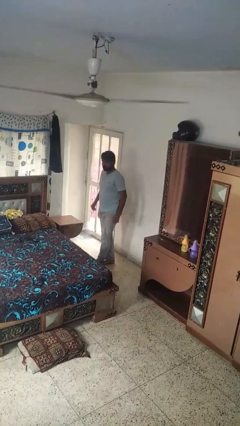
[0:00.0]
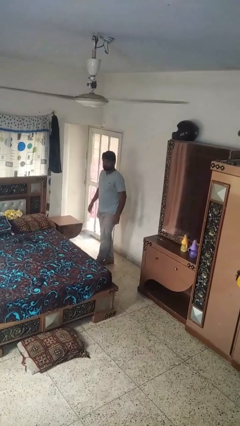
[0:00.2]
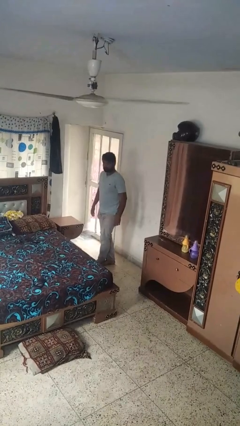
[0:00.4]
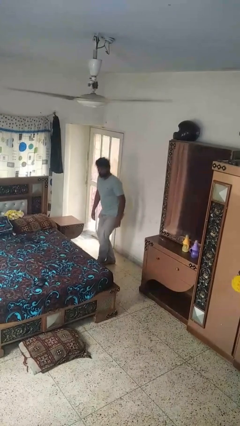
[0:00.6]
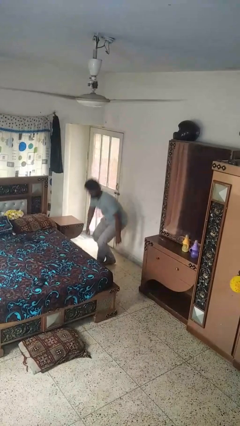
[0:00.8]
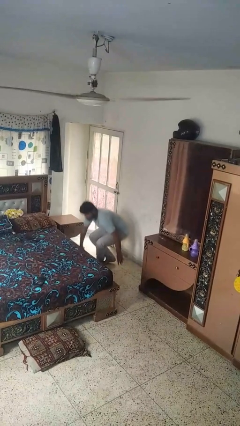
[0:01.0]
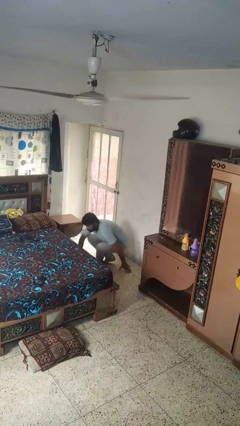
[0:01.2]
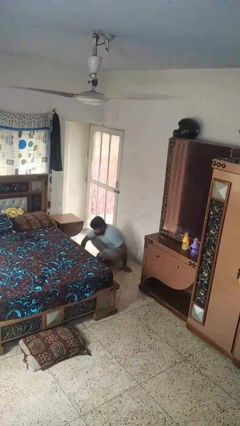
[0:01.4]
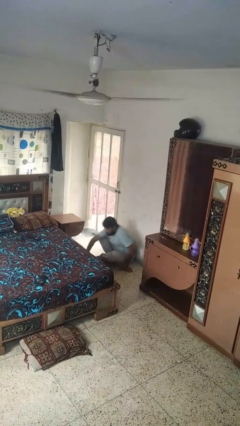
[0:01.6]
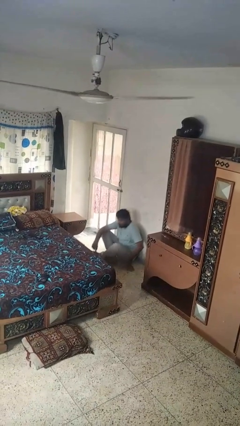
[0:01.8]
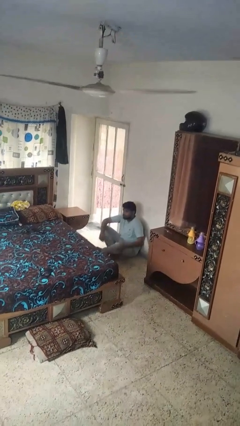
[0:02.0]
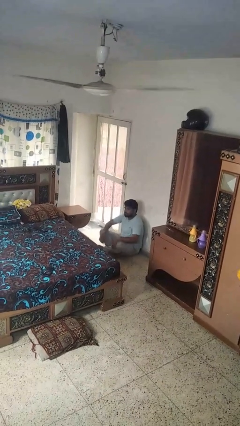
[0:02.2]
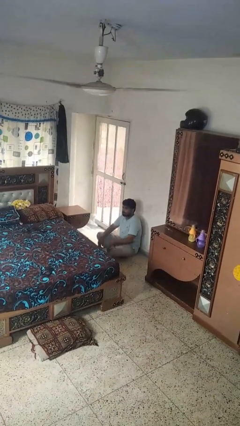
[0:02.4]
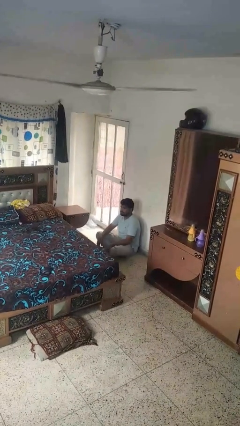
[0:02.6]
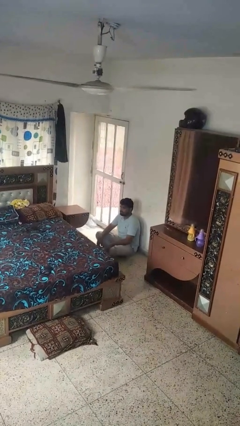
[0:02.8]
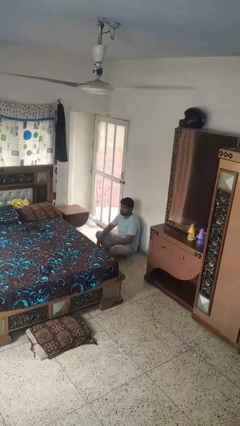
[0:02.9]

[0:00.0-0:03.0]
person sits crisscross

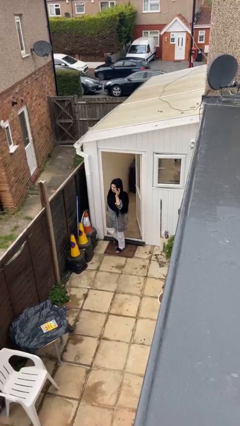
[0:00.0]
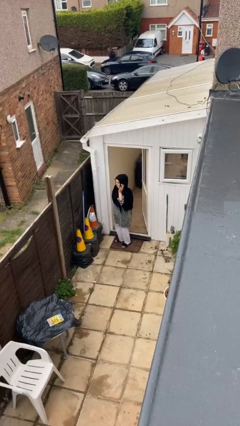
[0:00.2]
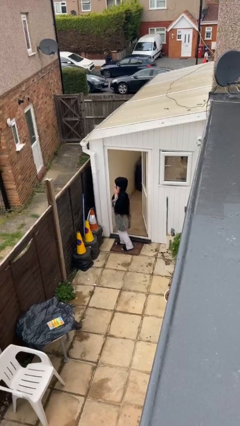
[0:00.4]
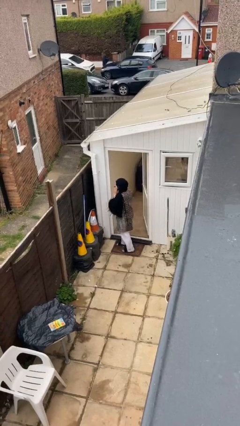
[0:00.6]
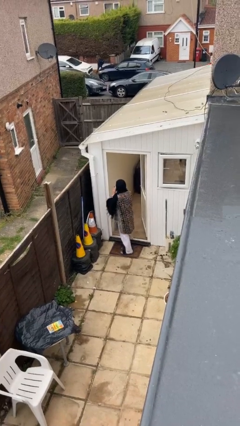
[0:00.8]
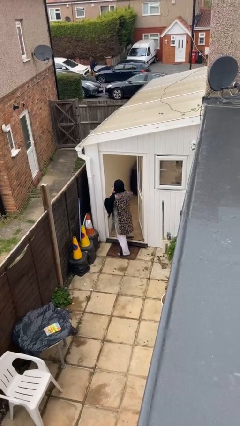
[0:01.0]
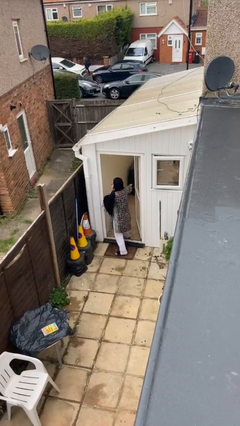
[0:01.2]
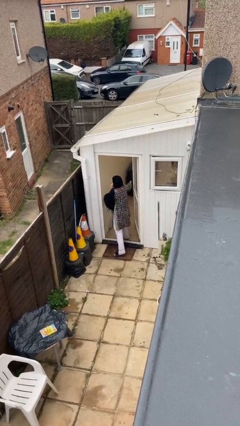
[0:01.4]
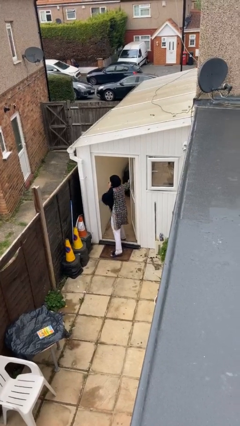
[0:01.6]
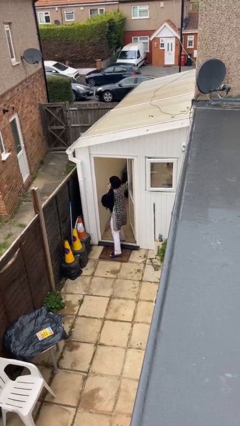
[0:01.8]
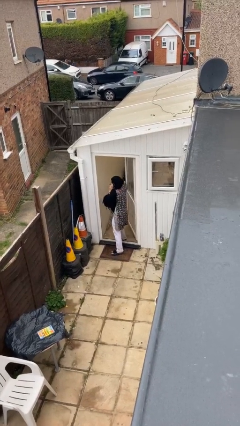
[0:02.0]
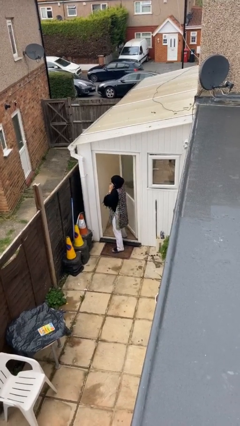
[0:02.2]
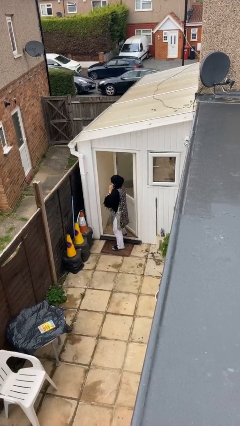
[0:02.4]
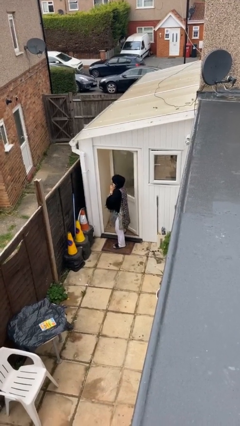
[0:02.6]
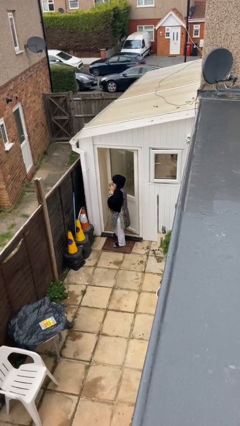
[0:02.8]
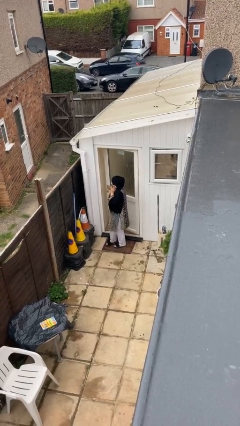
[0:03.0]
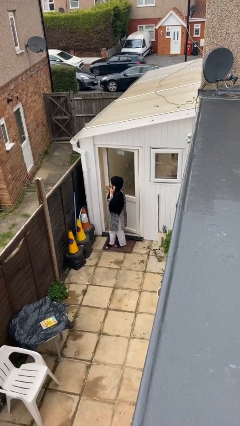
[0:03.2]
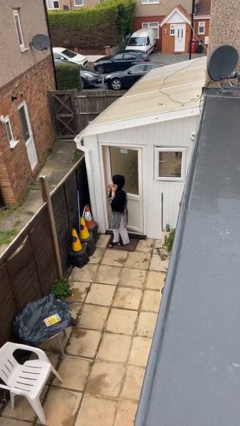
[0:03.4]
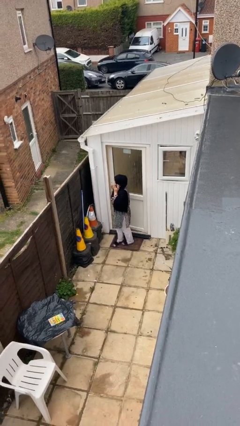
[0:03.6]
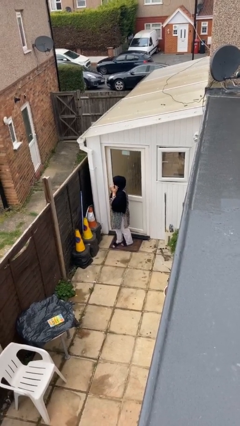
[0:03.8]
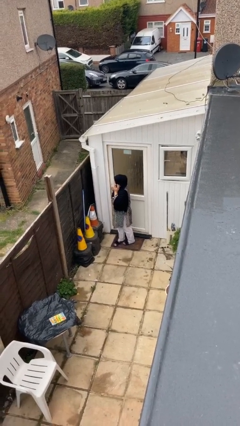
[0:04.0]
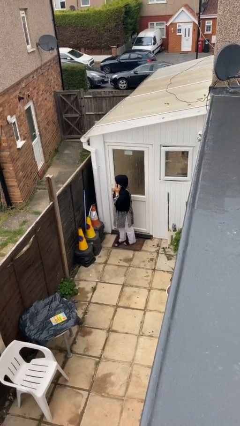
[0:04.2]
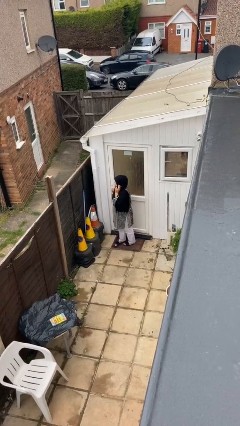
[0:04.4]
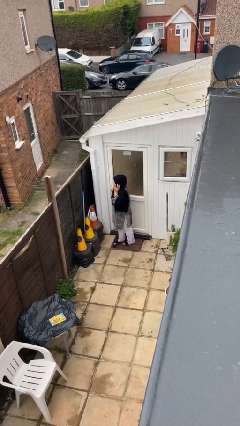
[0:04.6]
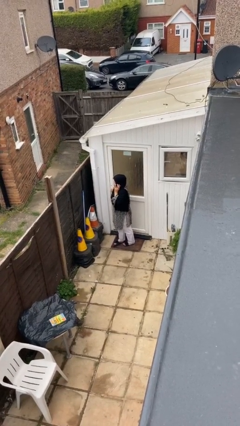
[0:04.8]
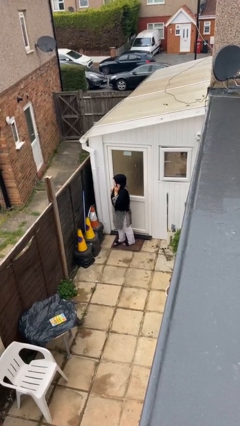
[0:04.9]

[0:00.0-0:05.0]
person closes facility door

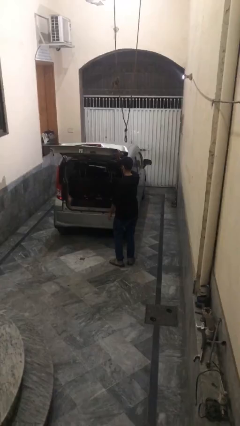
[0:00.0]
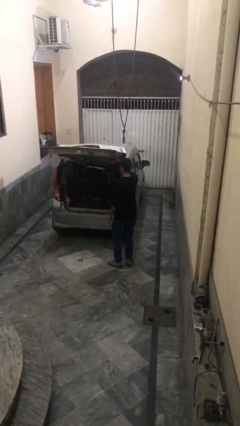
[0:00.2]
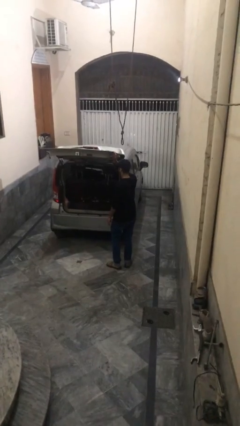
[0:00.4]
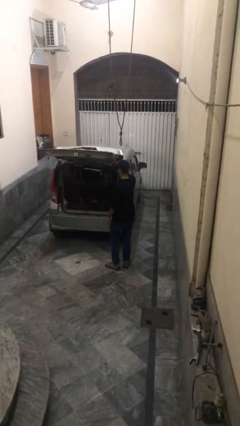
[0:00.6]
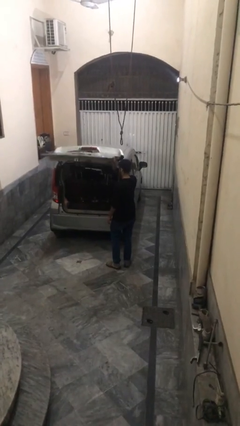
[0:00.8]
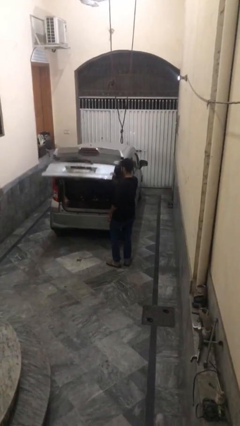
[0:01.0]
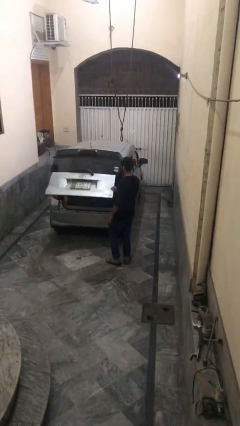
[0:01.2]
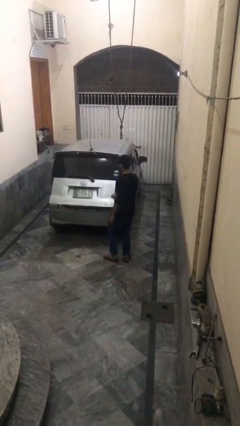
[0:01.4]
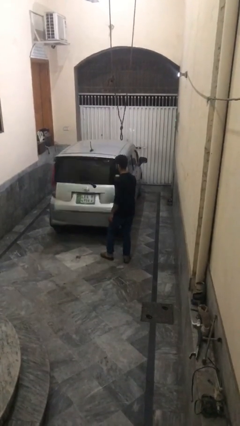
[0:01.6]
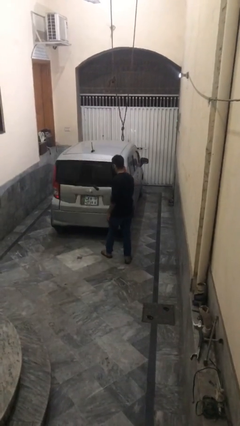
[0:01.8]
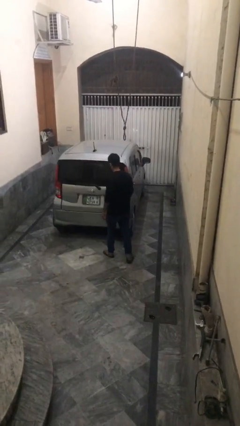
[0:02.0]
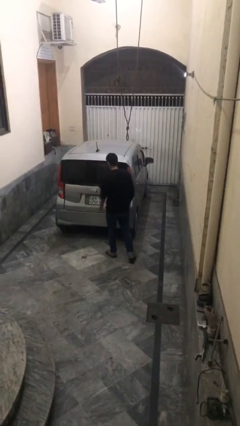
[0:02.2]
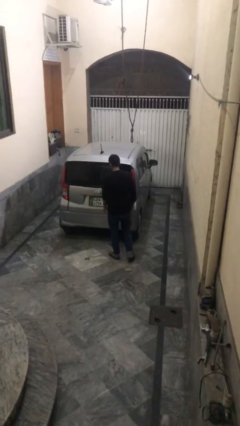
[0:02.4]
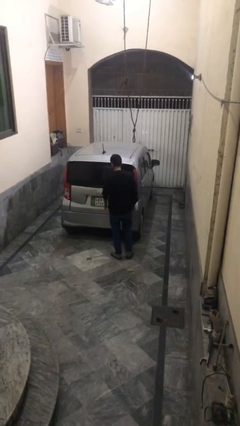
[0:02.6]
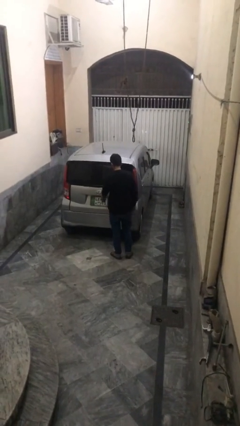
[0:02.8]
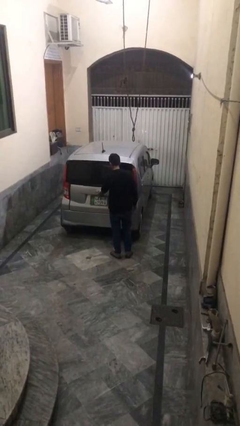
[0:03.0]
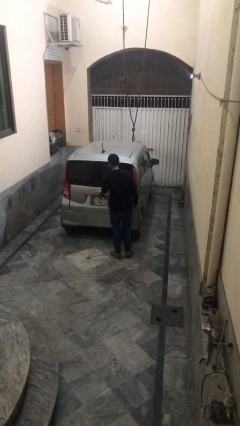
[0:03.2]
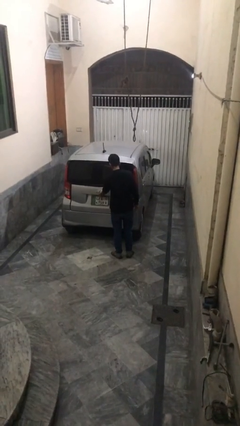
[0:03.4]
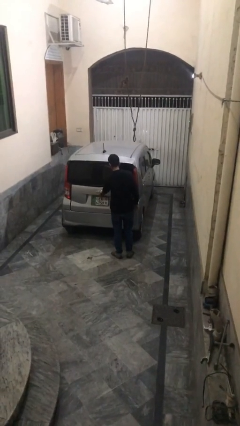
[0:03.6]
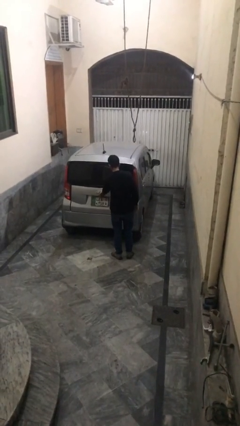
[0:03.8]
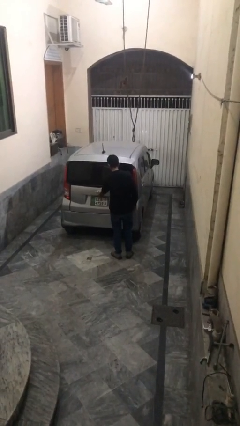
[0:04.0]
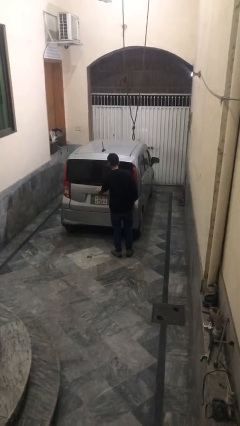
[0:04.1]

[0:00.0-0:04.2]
person closes car trunk

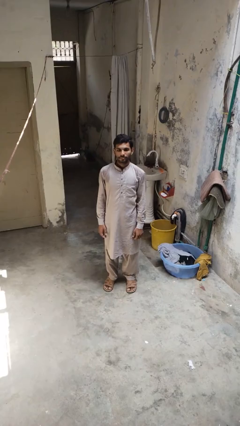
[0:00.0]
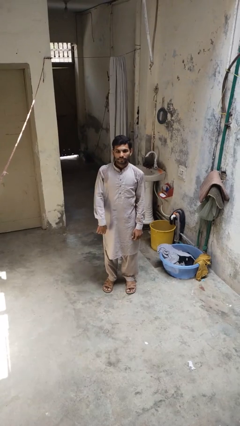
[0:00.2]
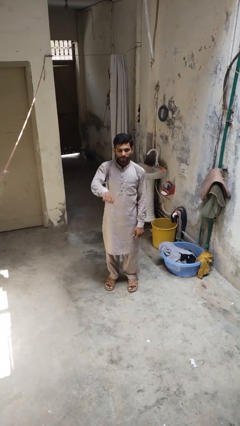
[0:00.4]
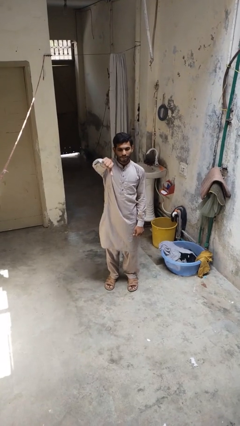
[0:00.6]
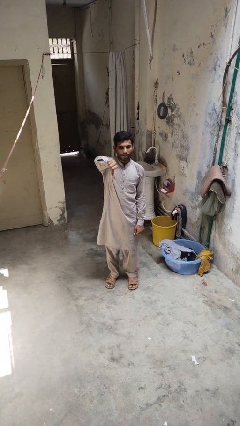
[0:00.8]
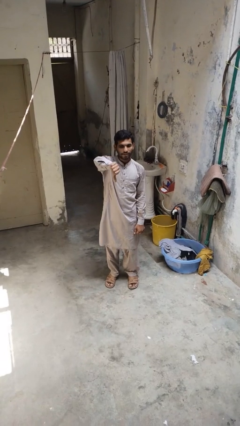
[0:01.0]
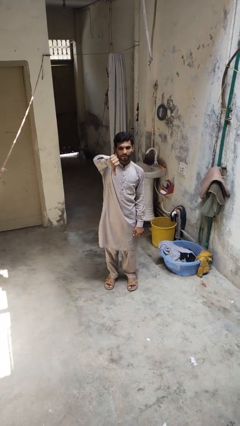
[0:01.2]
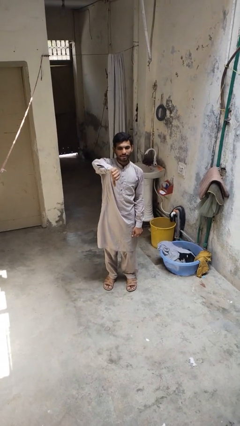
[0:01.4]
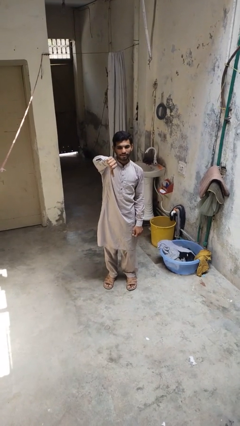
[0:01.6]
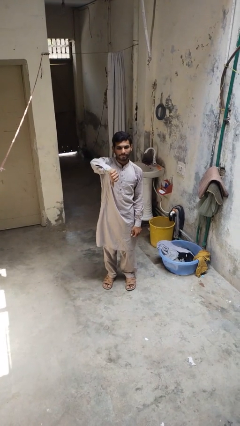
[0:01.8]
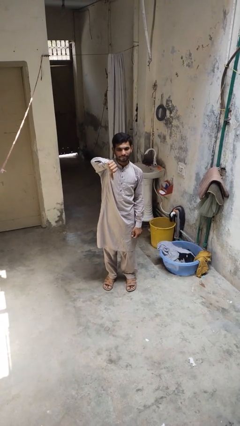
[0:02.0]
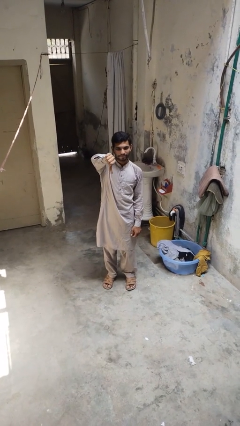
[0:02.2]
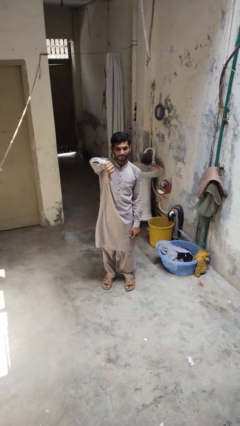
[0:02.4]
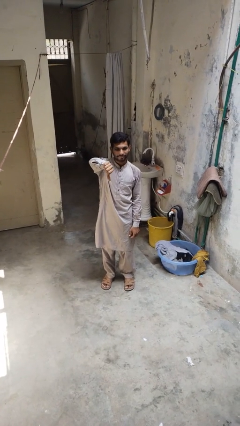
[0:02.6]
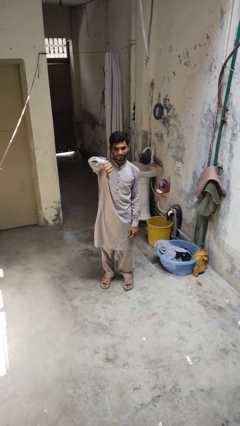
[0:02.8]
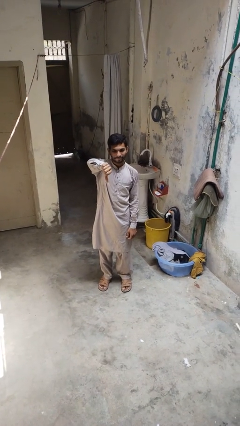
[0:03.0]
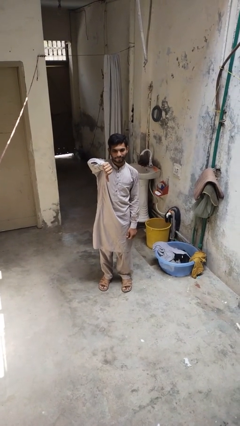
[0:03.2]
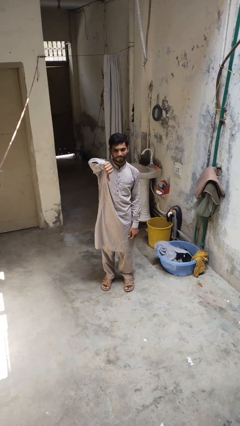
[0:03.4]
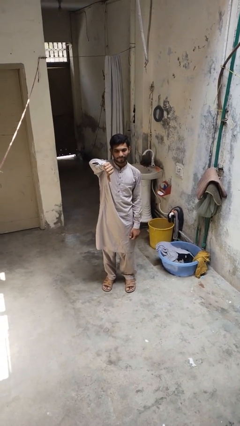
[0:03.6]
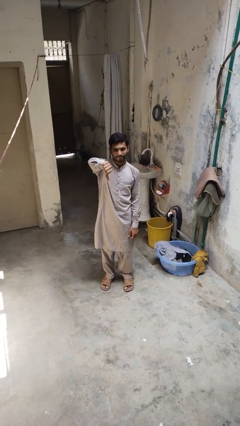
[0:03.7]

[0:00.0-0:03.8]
person gestures thumbs down

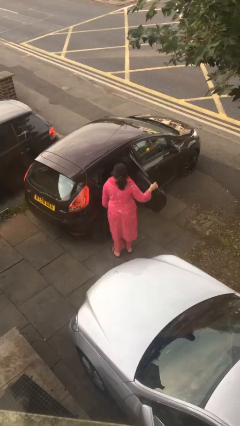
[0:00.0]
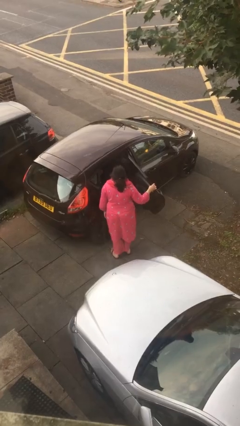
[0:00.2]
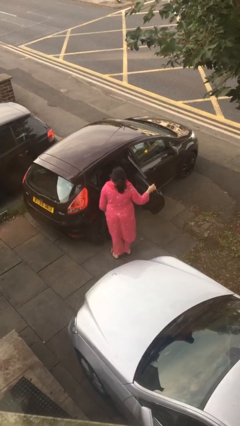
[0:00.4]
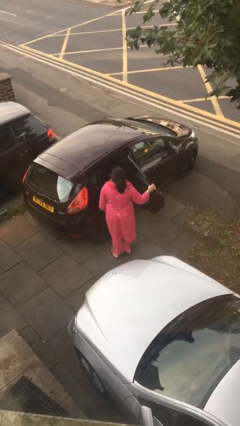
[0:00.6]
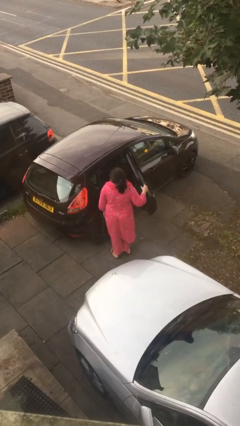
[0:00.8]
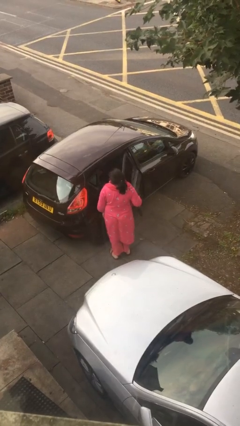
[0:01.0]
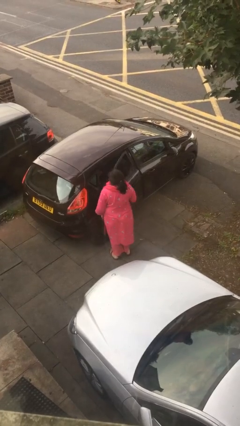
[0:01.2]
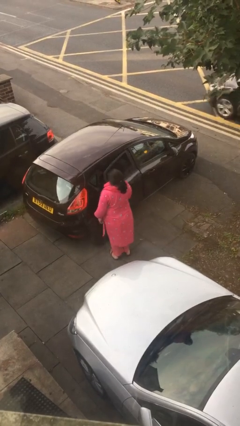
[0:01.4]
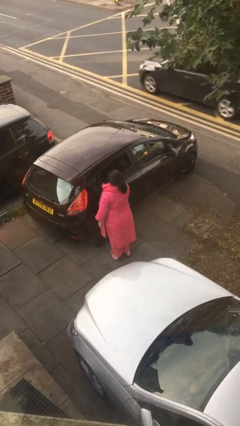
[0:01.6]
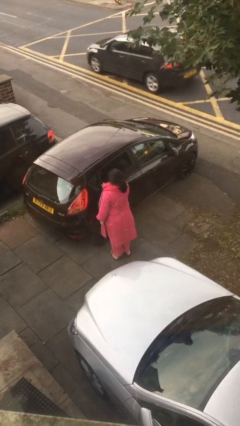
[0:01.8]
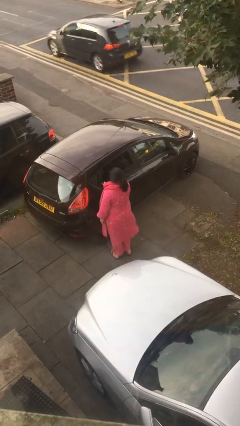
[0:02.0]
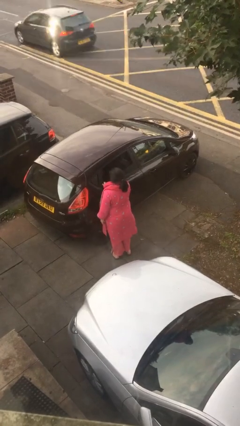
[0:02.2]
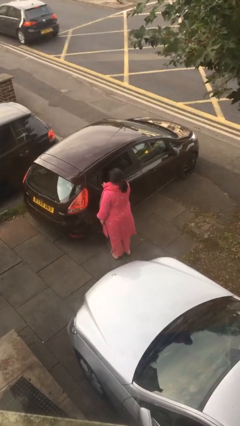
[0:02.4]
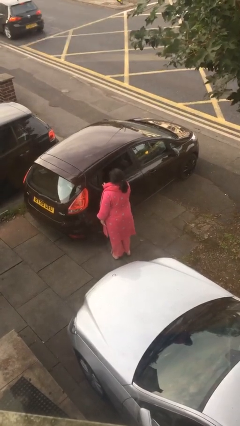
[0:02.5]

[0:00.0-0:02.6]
person closes car door
